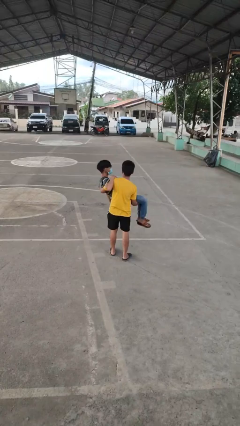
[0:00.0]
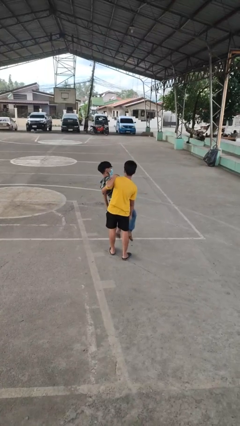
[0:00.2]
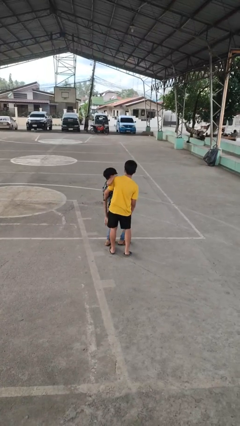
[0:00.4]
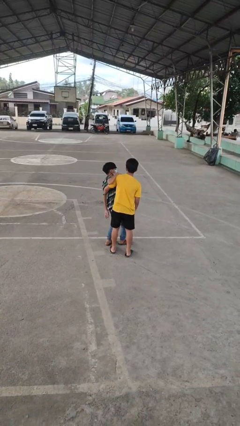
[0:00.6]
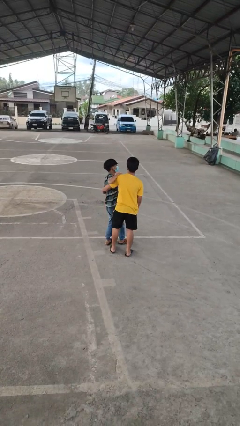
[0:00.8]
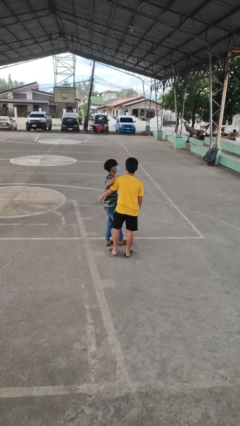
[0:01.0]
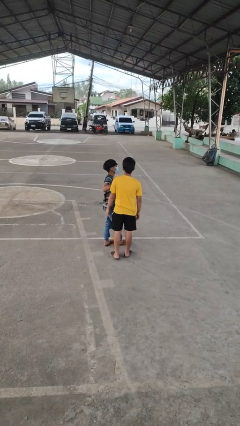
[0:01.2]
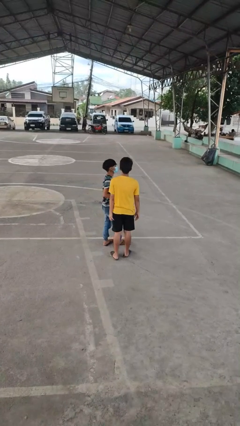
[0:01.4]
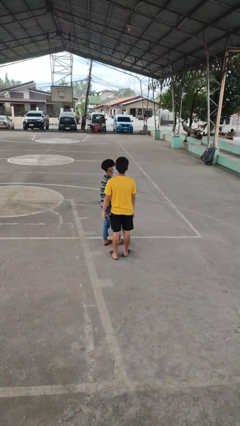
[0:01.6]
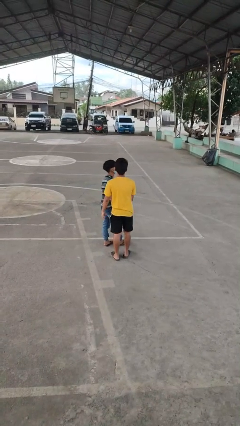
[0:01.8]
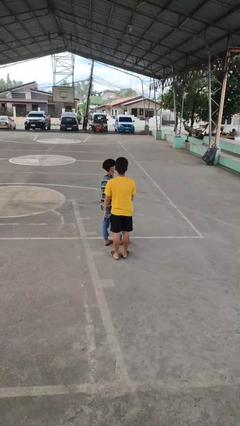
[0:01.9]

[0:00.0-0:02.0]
person puts down person

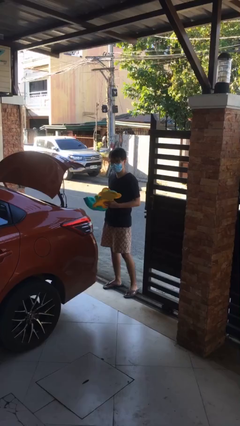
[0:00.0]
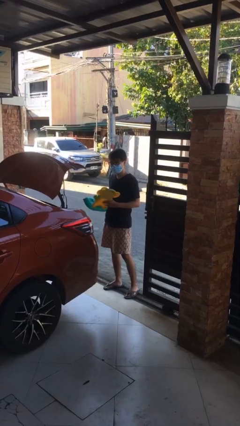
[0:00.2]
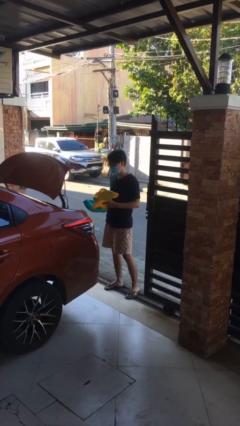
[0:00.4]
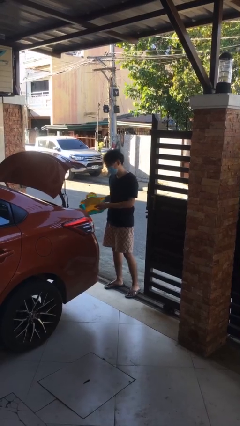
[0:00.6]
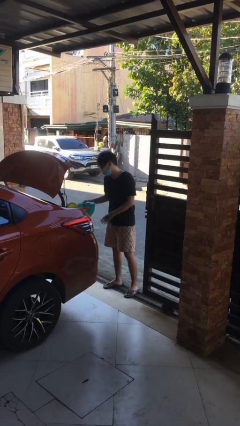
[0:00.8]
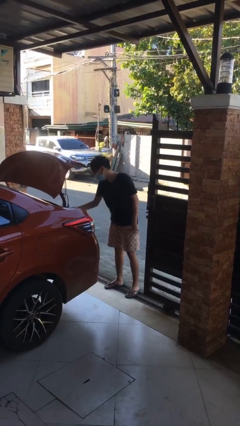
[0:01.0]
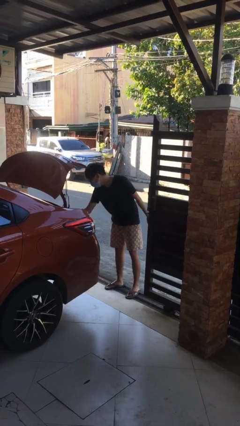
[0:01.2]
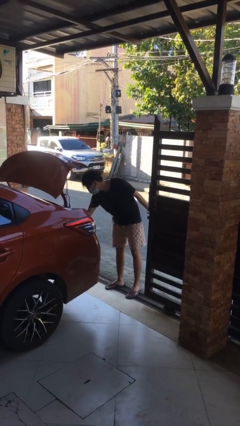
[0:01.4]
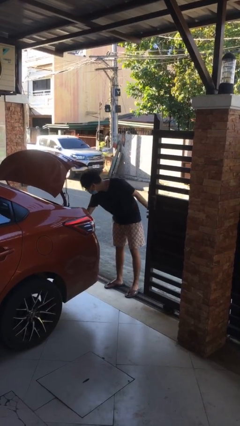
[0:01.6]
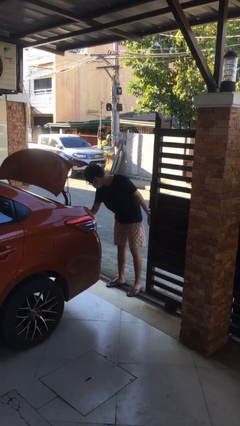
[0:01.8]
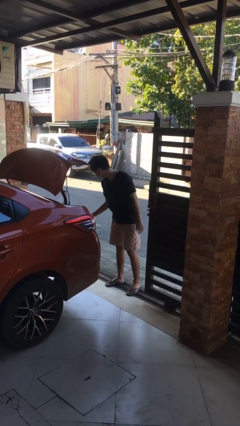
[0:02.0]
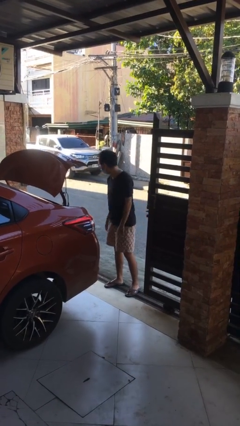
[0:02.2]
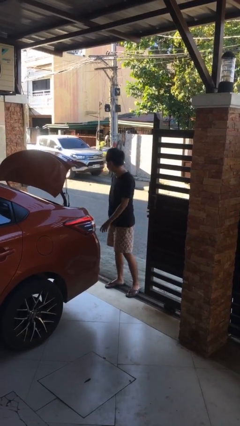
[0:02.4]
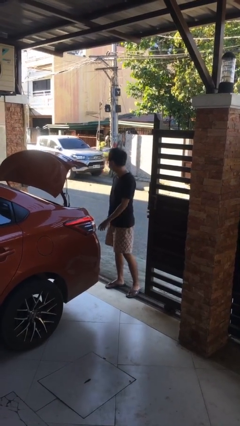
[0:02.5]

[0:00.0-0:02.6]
person loads car

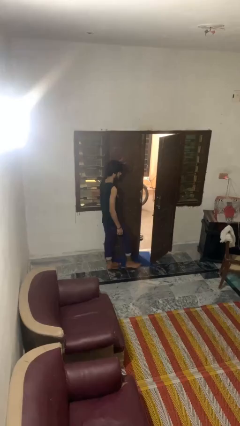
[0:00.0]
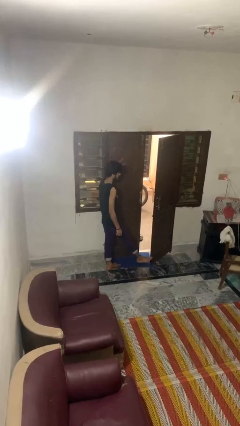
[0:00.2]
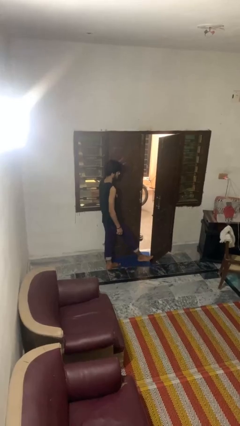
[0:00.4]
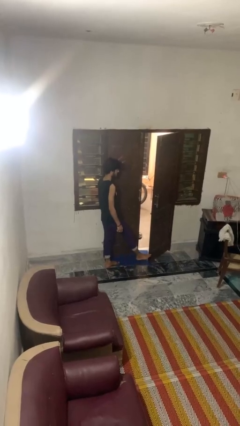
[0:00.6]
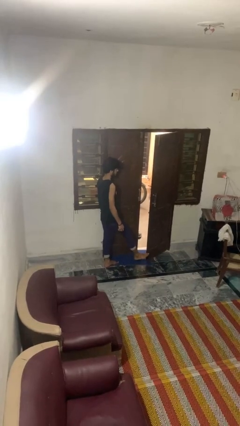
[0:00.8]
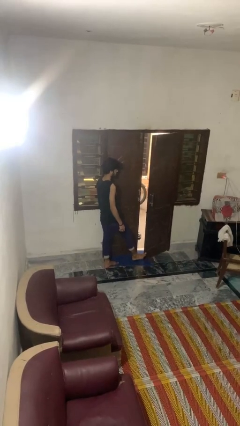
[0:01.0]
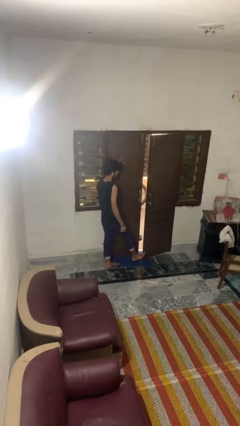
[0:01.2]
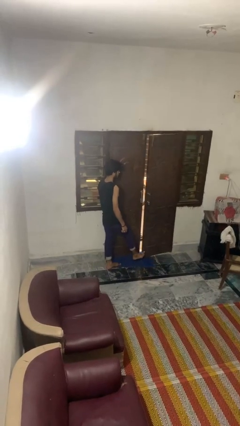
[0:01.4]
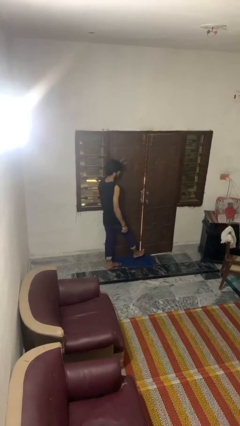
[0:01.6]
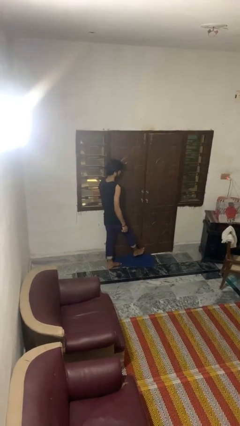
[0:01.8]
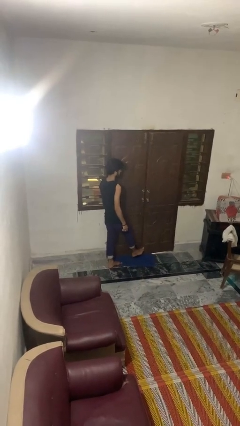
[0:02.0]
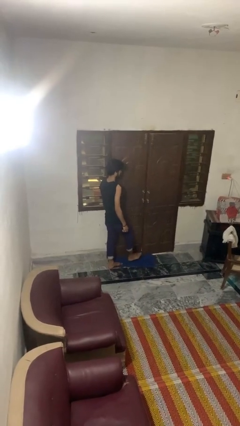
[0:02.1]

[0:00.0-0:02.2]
person closes door with foot

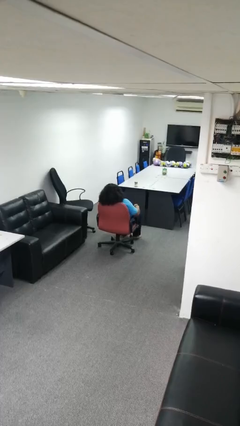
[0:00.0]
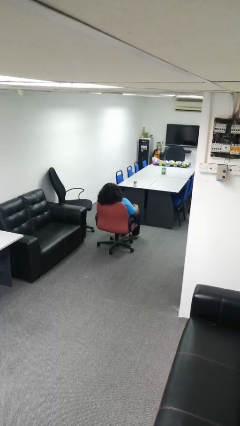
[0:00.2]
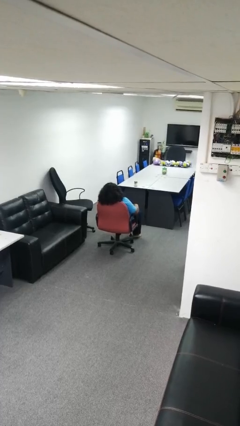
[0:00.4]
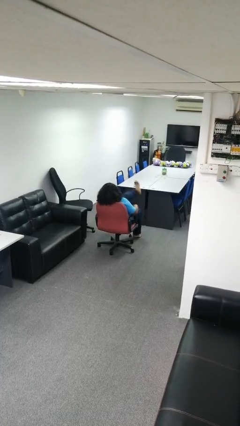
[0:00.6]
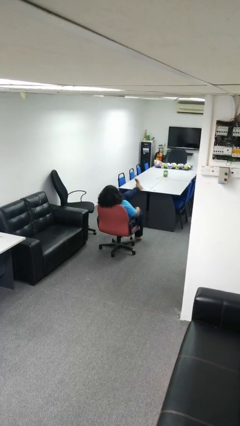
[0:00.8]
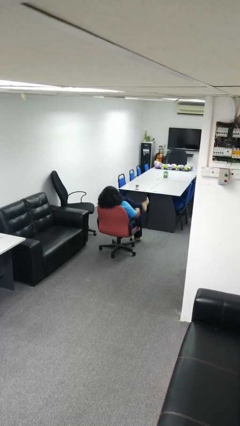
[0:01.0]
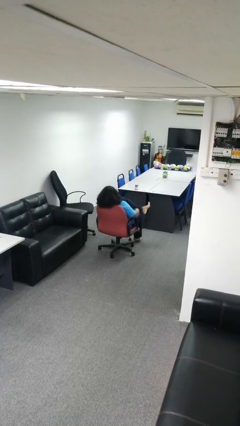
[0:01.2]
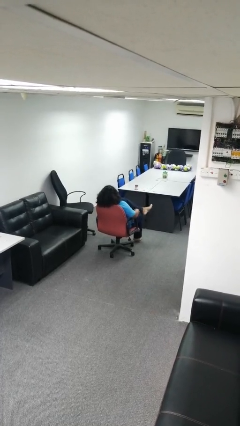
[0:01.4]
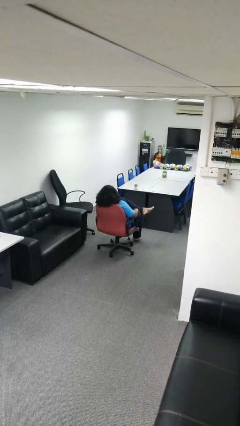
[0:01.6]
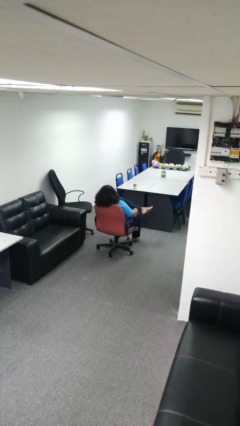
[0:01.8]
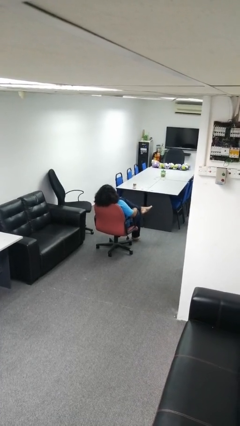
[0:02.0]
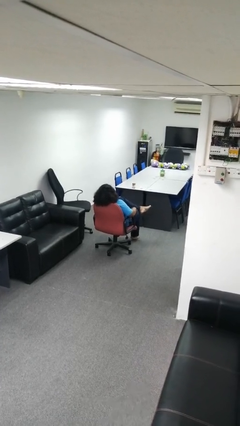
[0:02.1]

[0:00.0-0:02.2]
person crosses legs

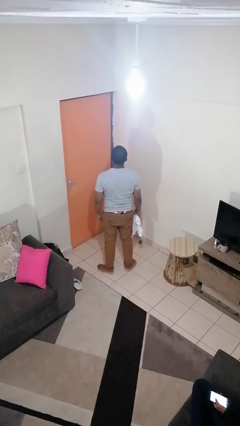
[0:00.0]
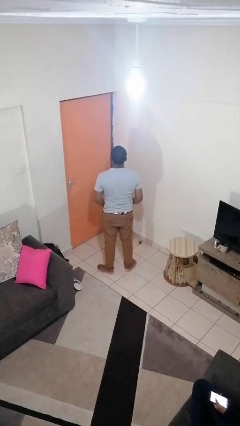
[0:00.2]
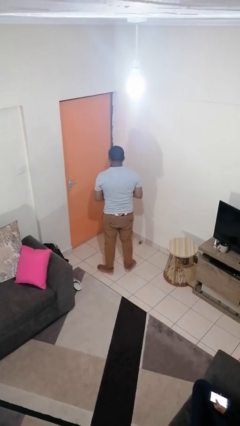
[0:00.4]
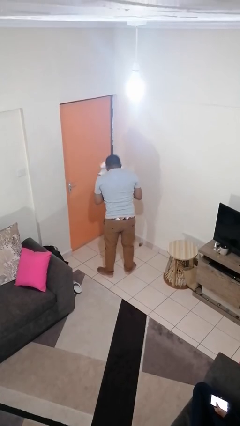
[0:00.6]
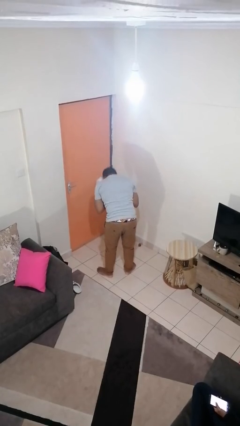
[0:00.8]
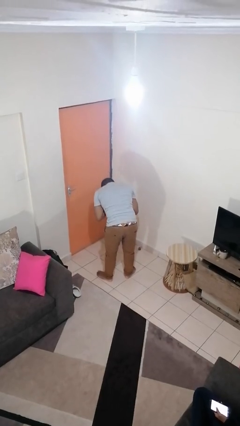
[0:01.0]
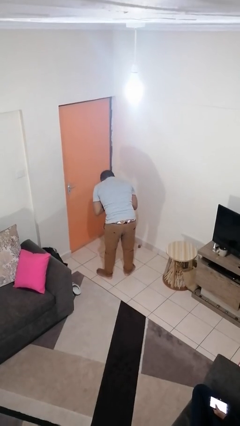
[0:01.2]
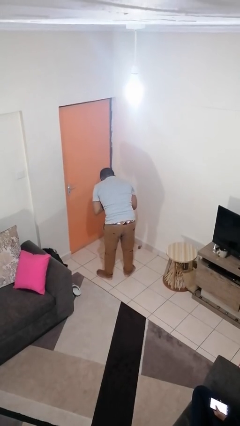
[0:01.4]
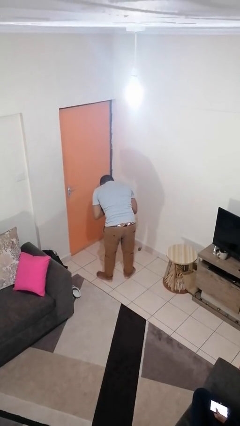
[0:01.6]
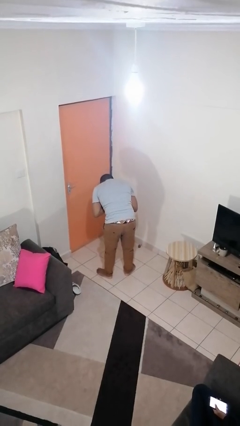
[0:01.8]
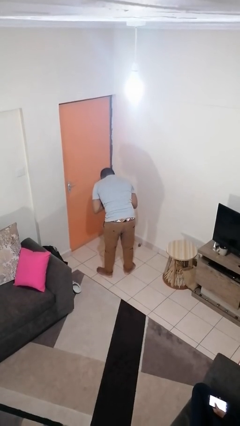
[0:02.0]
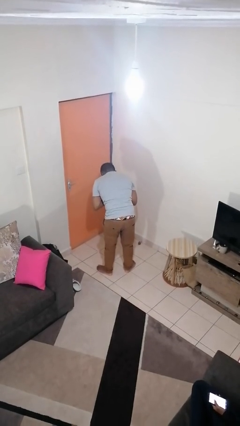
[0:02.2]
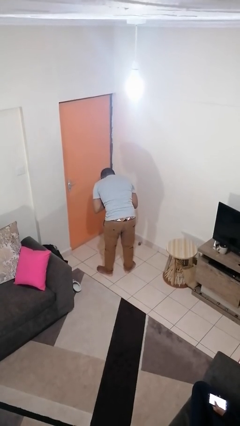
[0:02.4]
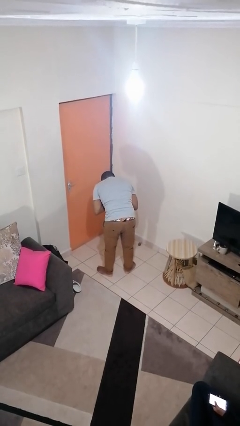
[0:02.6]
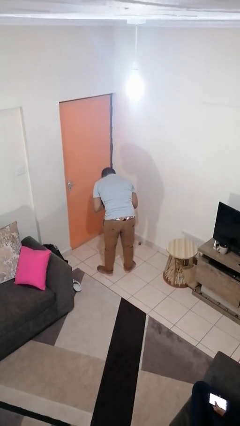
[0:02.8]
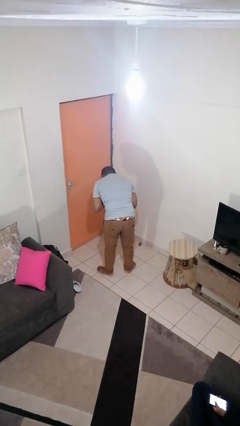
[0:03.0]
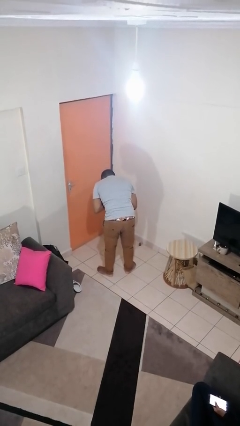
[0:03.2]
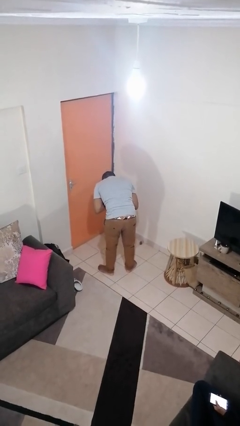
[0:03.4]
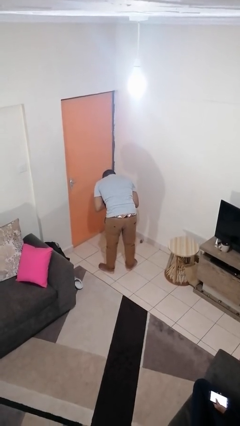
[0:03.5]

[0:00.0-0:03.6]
person blows nose

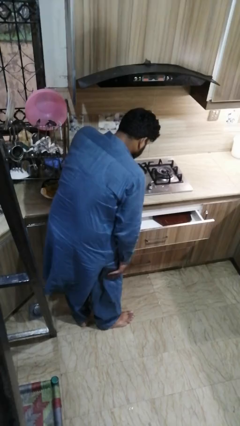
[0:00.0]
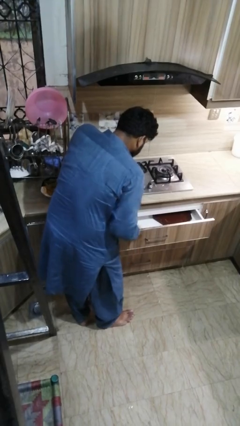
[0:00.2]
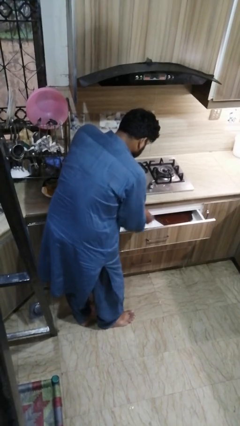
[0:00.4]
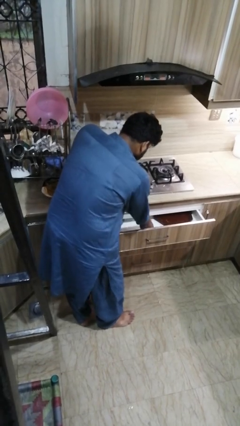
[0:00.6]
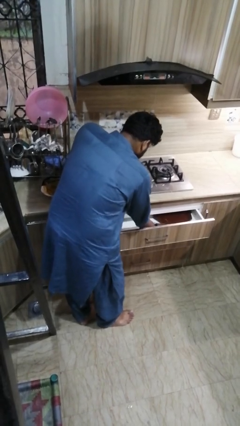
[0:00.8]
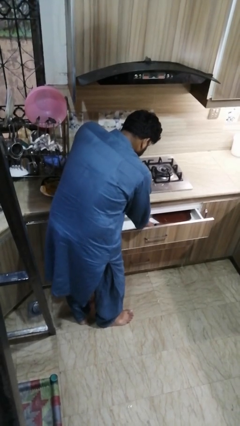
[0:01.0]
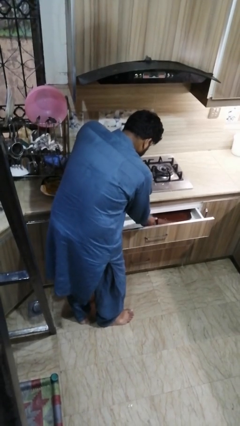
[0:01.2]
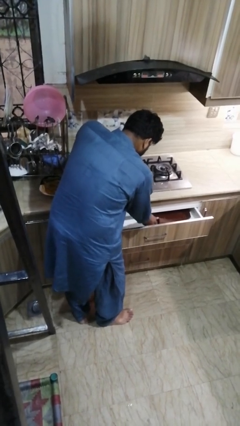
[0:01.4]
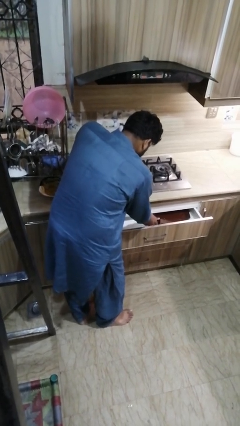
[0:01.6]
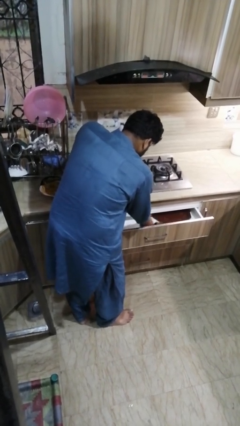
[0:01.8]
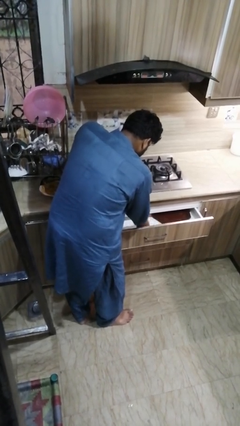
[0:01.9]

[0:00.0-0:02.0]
person searches in kitchen drawer

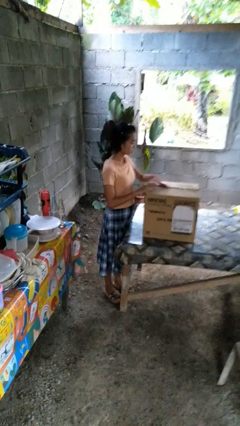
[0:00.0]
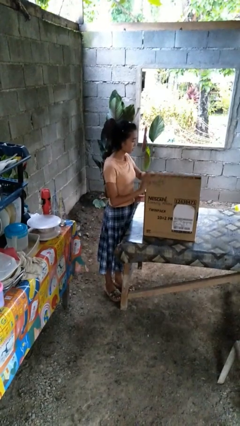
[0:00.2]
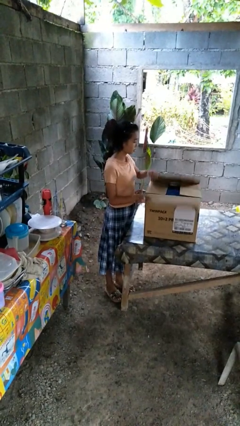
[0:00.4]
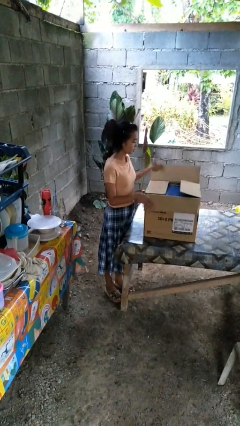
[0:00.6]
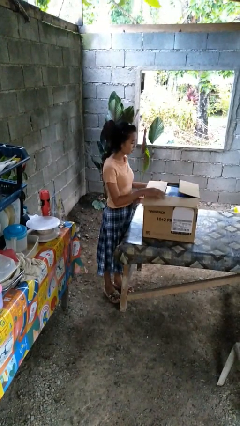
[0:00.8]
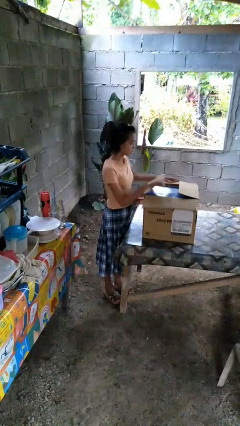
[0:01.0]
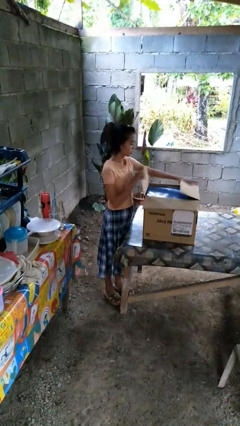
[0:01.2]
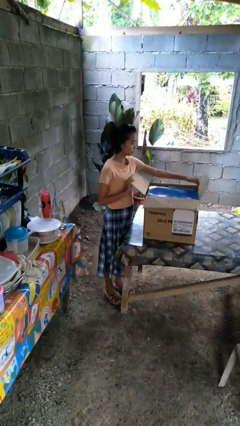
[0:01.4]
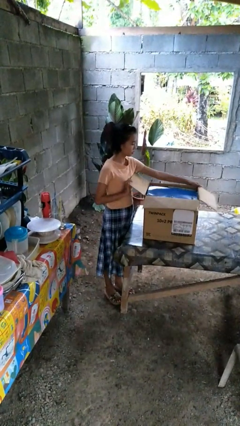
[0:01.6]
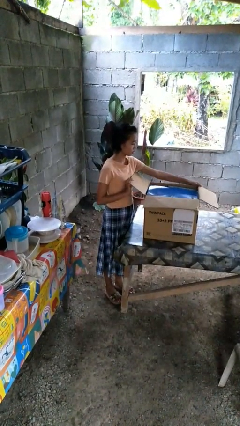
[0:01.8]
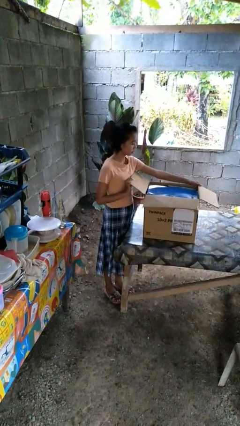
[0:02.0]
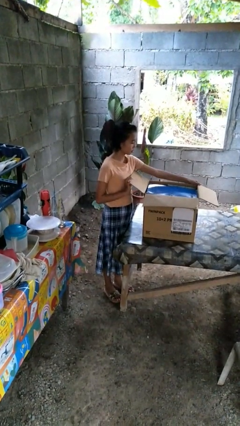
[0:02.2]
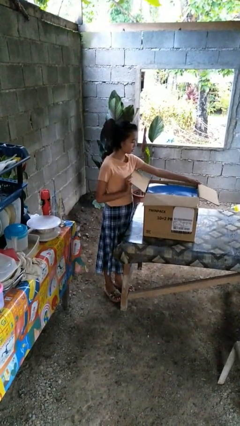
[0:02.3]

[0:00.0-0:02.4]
person opens box
